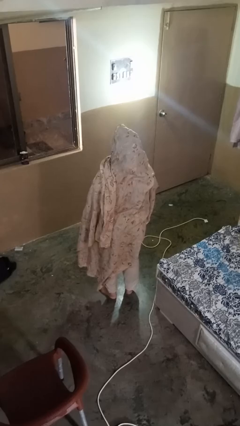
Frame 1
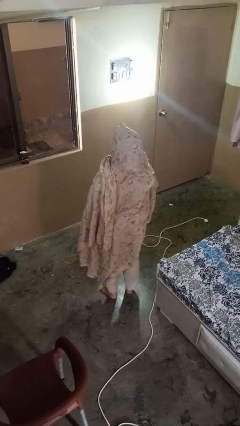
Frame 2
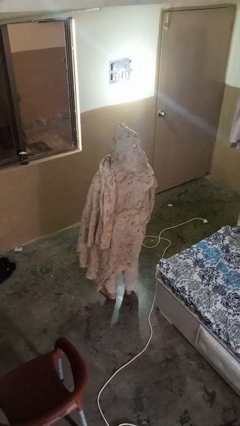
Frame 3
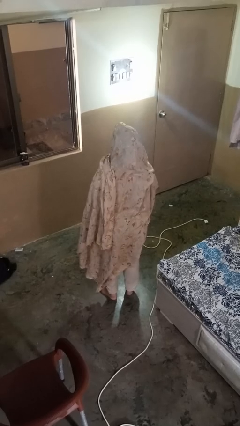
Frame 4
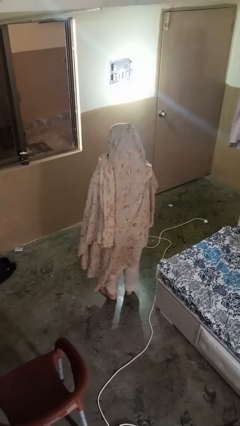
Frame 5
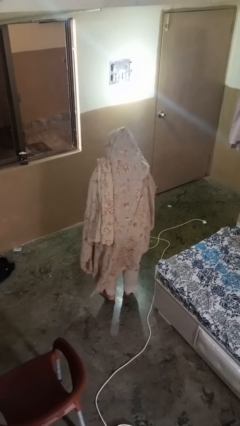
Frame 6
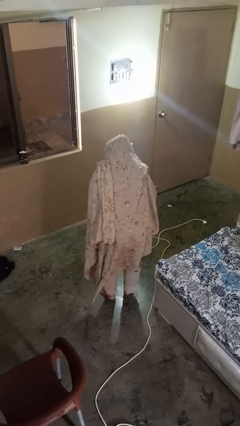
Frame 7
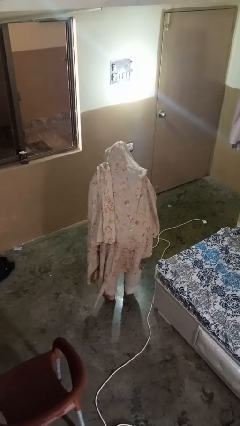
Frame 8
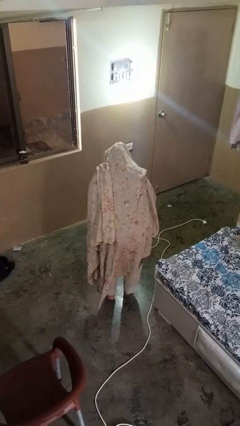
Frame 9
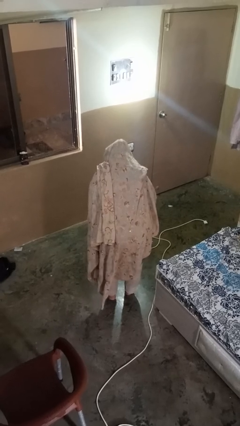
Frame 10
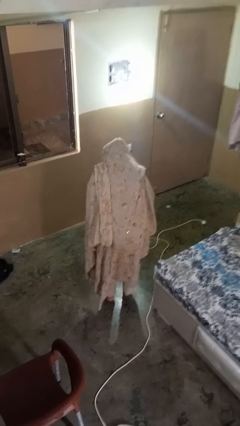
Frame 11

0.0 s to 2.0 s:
person bows

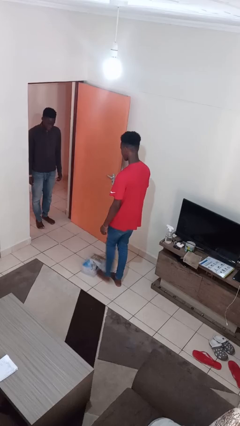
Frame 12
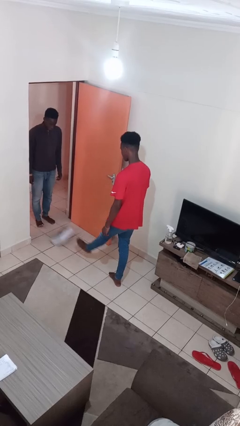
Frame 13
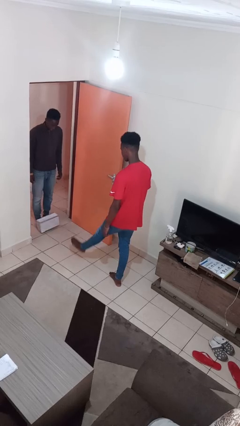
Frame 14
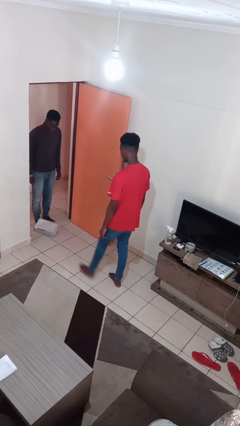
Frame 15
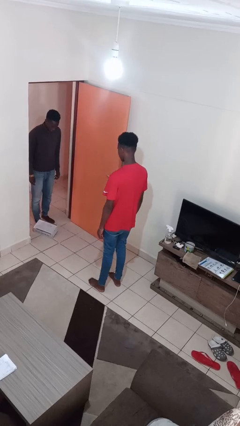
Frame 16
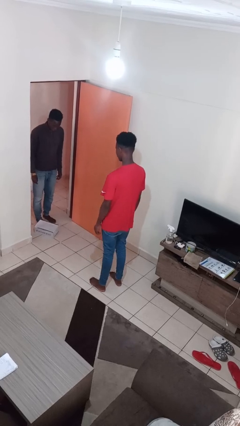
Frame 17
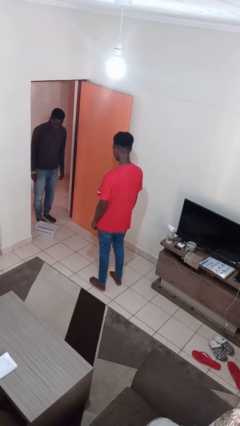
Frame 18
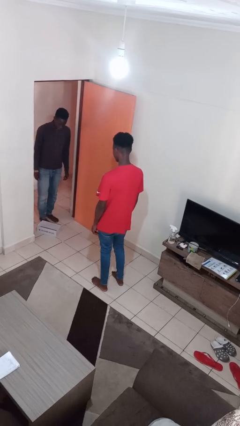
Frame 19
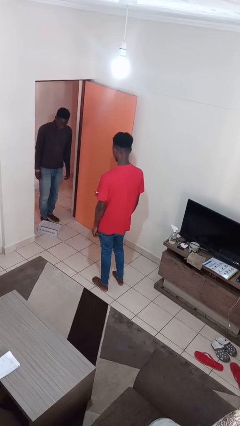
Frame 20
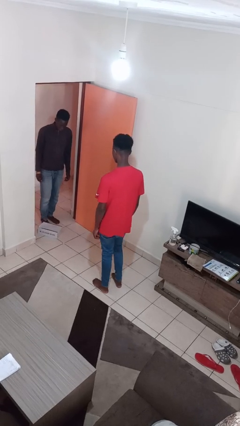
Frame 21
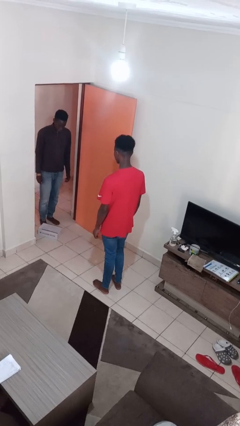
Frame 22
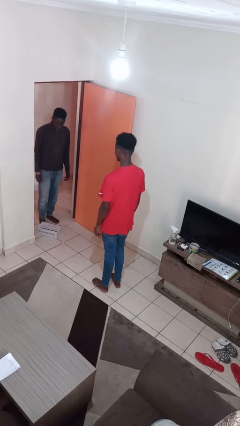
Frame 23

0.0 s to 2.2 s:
person kicks object to person

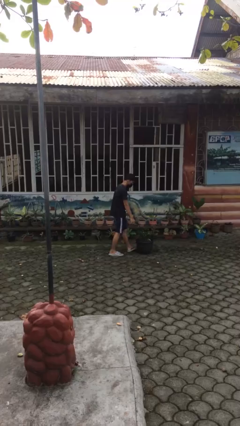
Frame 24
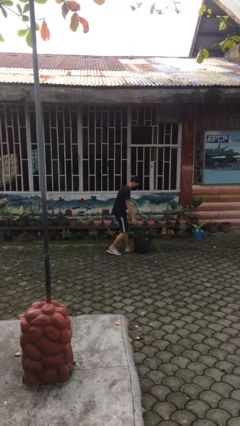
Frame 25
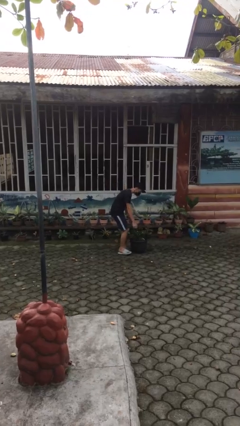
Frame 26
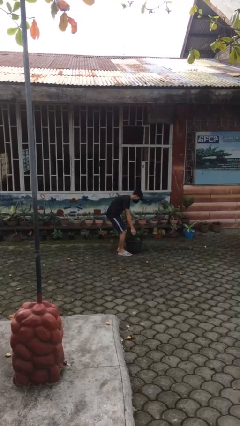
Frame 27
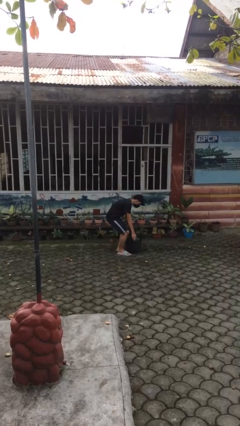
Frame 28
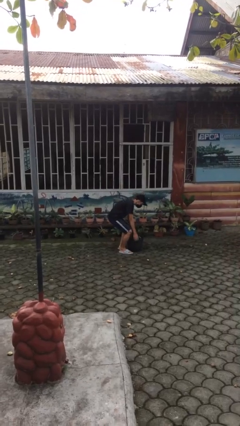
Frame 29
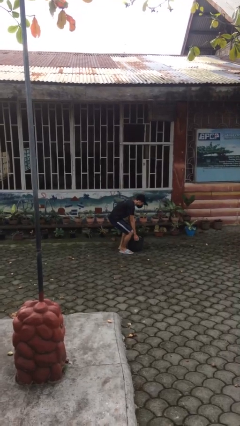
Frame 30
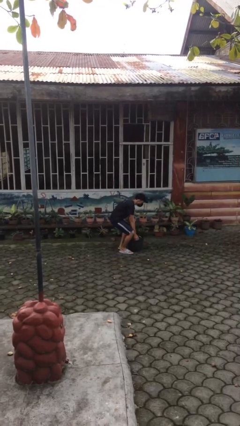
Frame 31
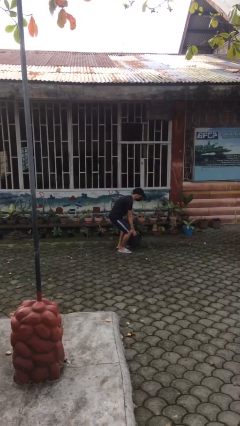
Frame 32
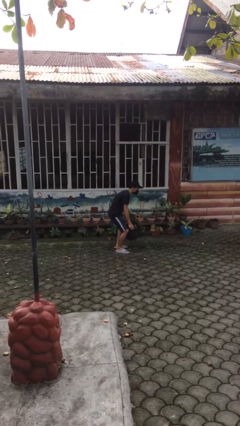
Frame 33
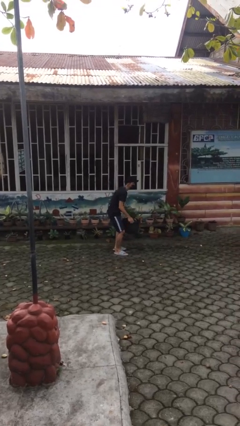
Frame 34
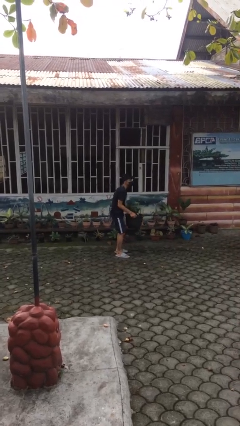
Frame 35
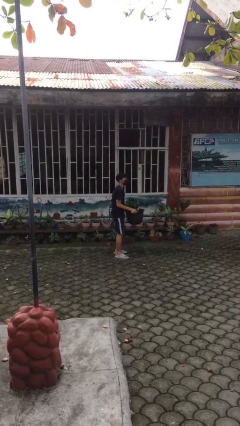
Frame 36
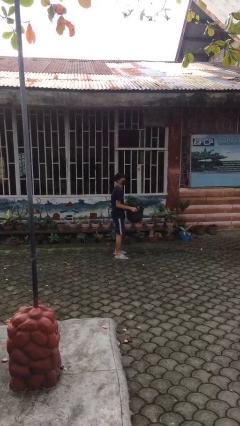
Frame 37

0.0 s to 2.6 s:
person picks up object from floor

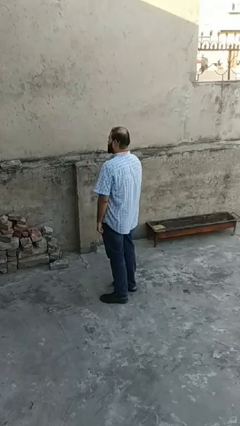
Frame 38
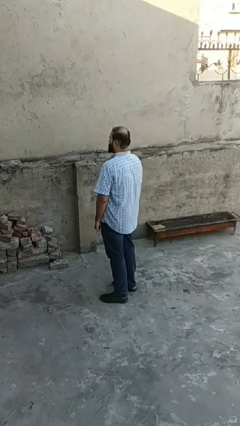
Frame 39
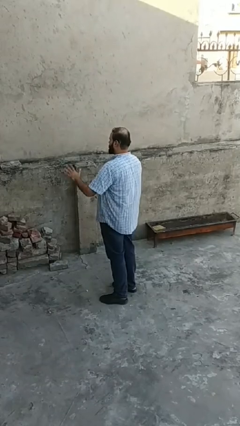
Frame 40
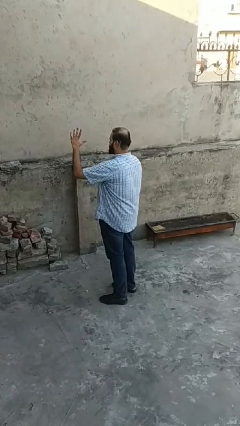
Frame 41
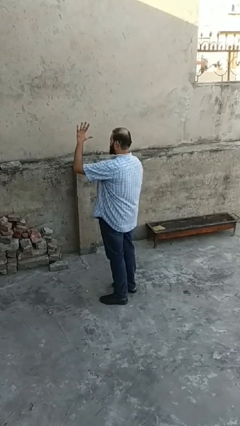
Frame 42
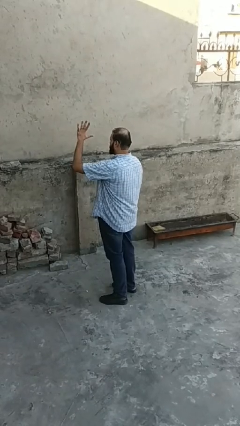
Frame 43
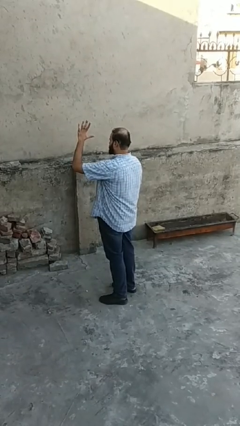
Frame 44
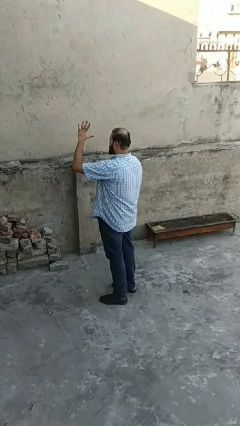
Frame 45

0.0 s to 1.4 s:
person gestures number five

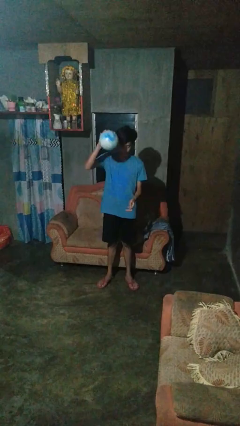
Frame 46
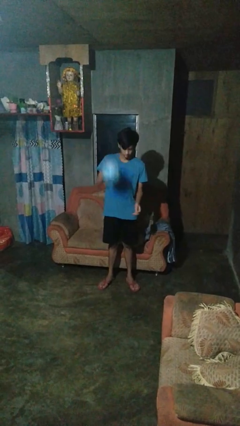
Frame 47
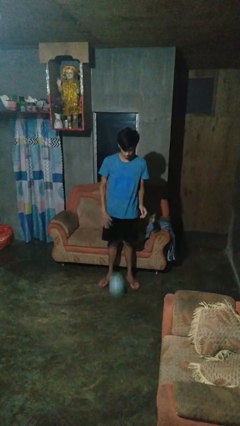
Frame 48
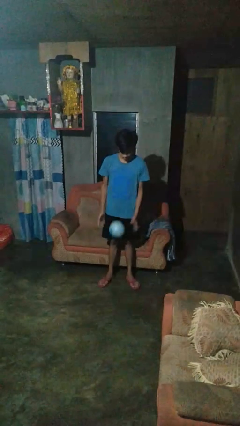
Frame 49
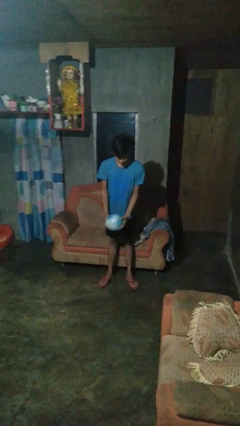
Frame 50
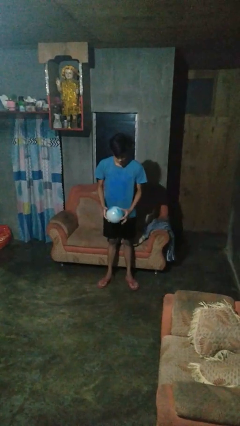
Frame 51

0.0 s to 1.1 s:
person bounces ball on floor

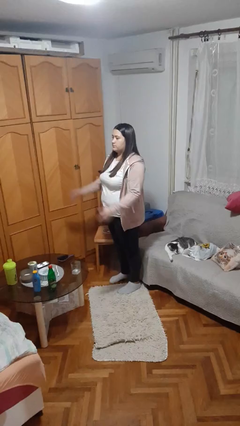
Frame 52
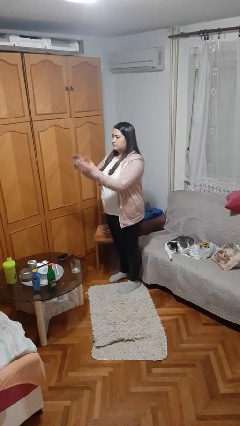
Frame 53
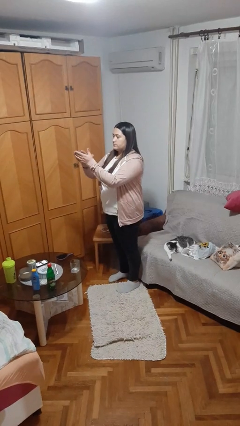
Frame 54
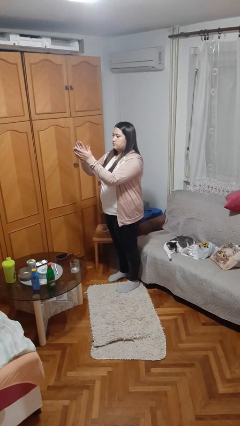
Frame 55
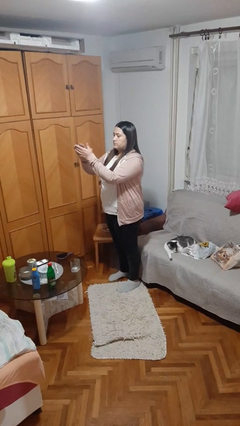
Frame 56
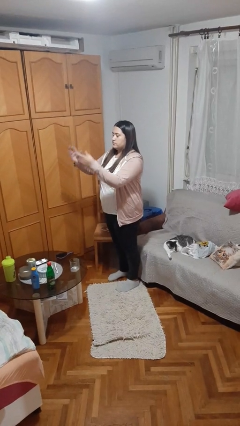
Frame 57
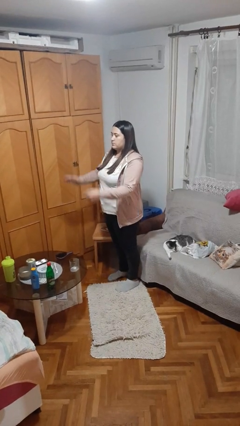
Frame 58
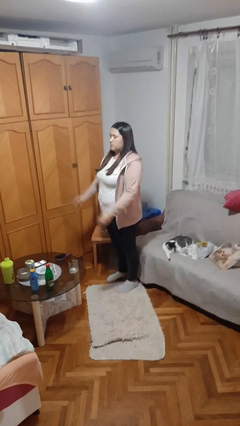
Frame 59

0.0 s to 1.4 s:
person claps hands

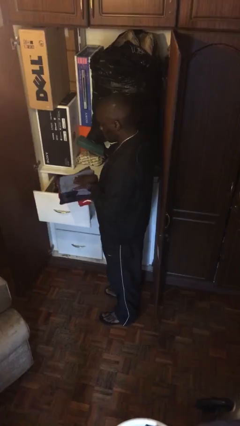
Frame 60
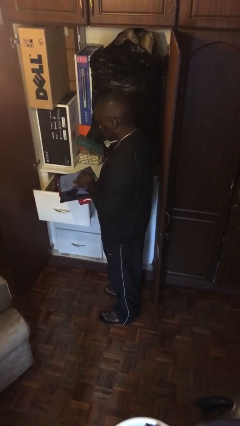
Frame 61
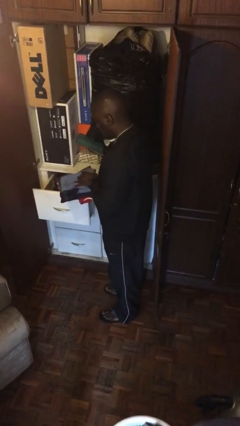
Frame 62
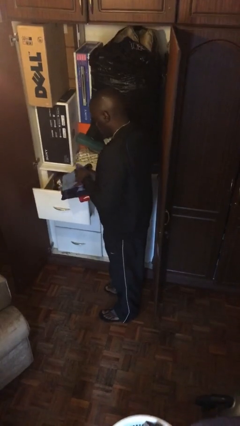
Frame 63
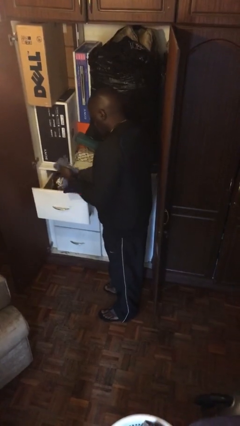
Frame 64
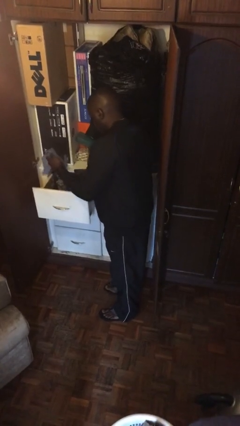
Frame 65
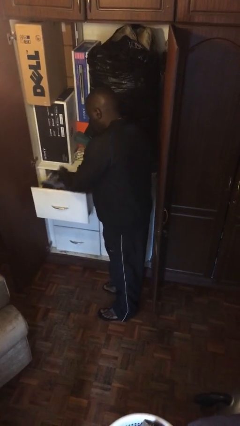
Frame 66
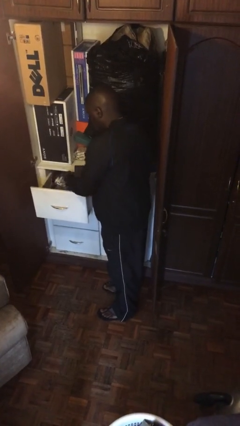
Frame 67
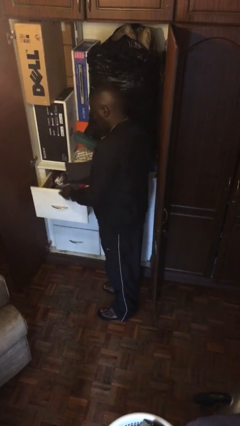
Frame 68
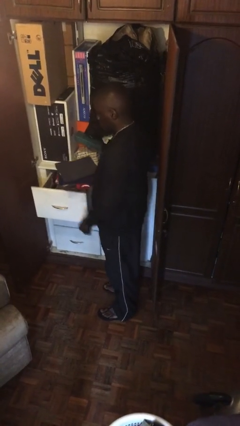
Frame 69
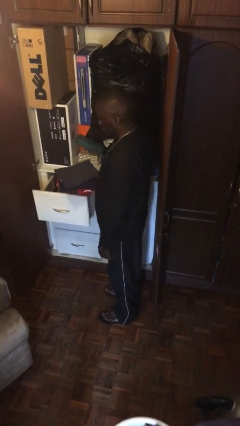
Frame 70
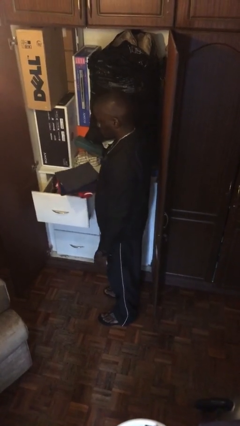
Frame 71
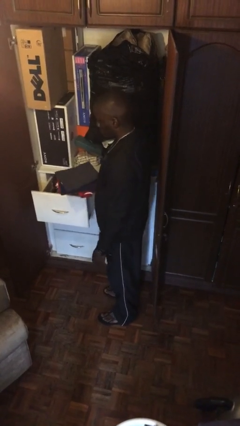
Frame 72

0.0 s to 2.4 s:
person puts clothes into dresser

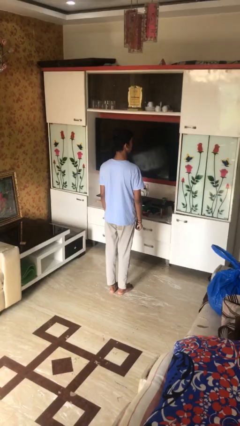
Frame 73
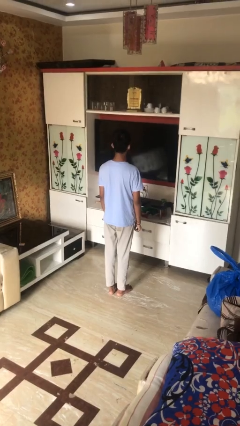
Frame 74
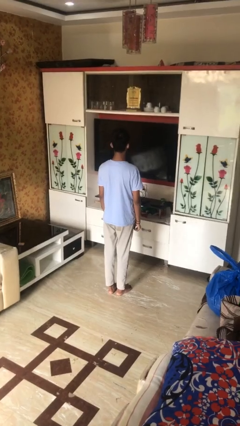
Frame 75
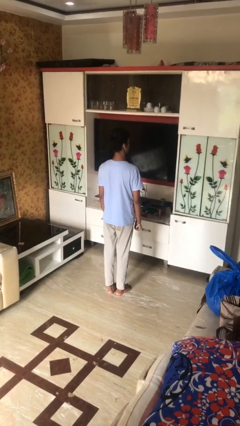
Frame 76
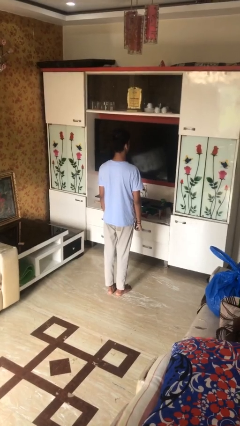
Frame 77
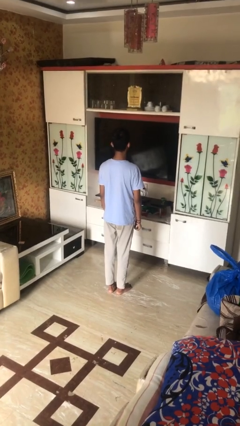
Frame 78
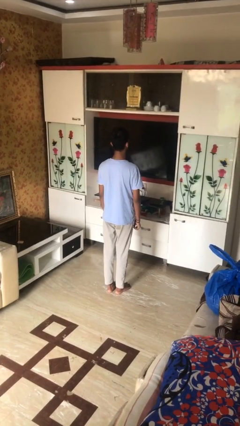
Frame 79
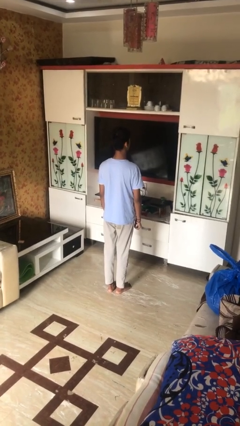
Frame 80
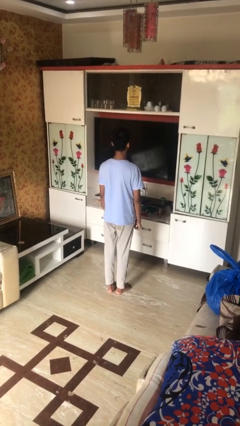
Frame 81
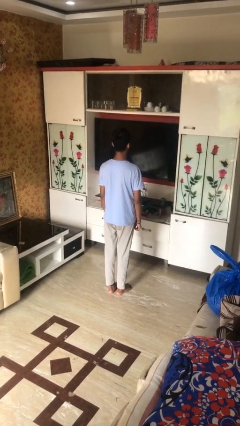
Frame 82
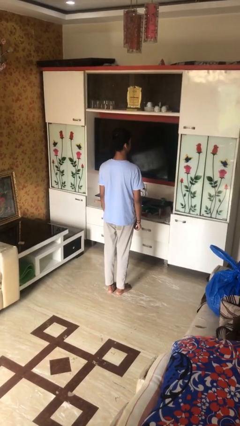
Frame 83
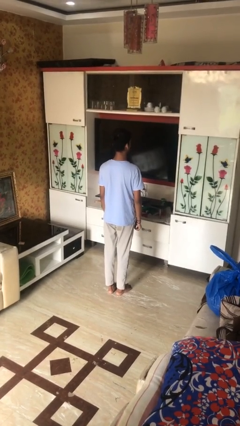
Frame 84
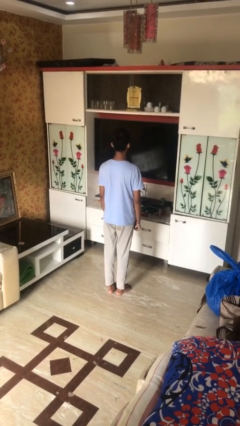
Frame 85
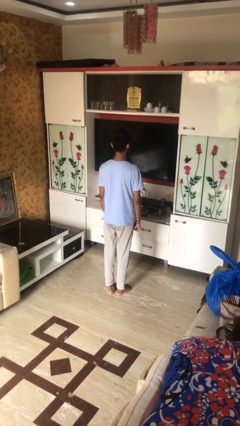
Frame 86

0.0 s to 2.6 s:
person shakes head

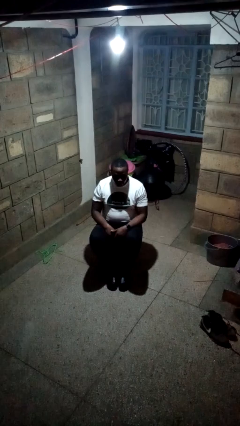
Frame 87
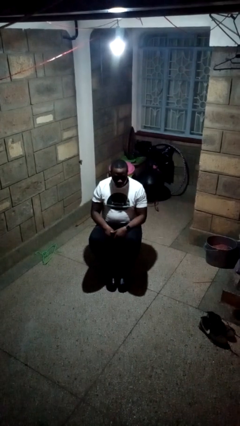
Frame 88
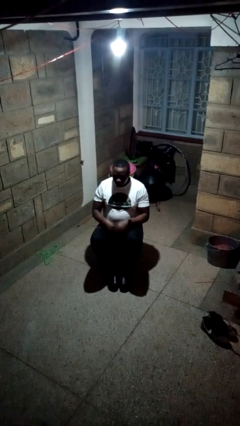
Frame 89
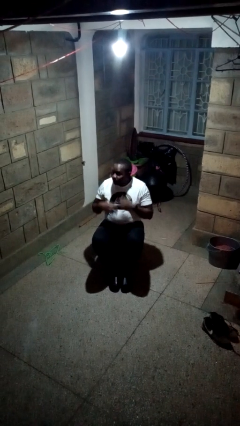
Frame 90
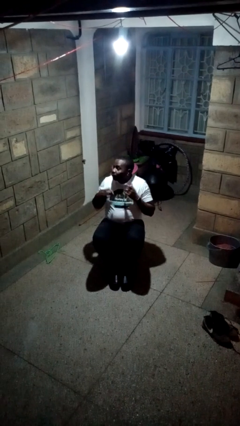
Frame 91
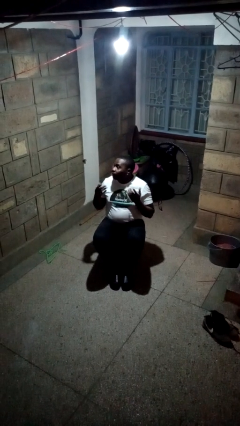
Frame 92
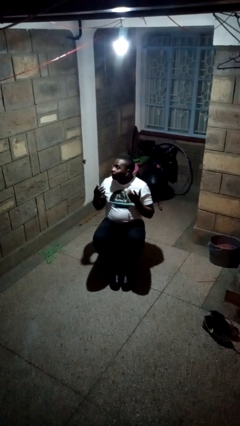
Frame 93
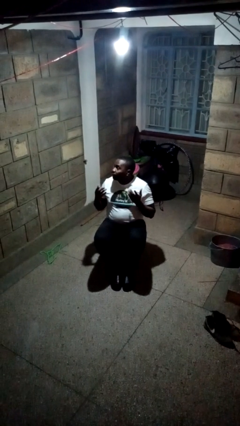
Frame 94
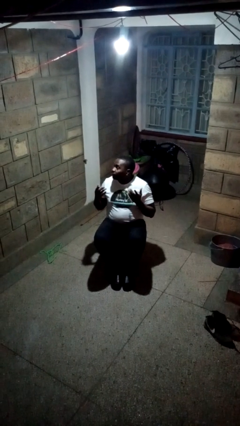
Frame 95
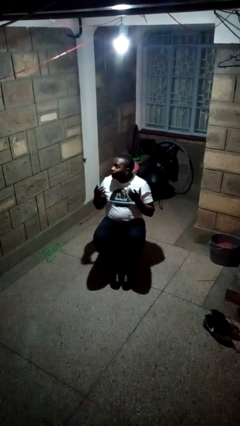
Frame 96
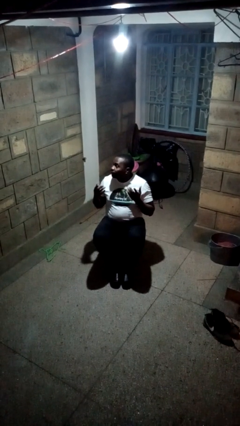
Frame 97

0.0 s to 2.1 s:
person shrugs
